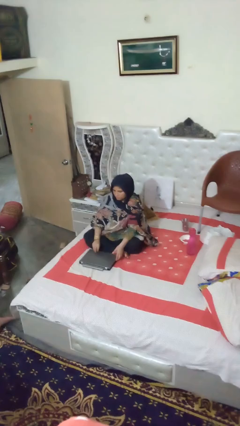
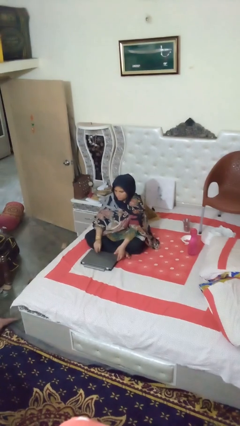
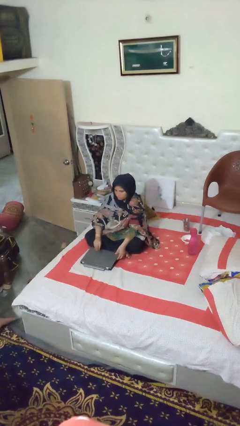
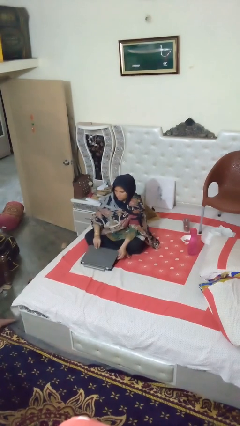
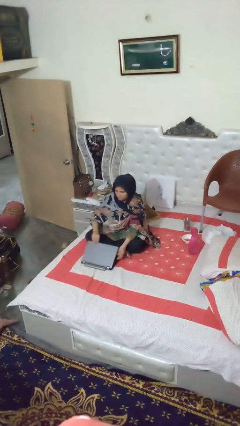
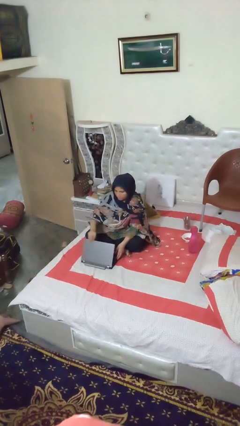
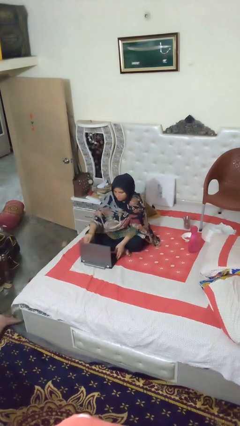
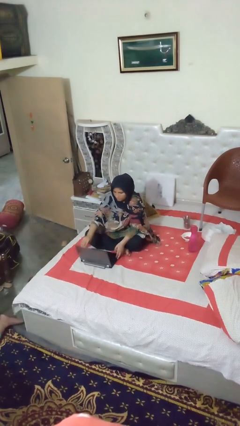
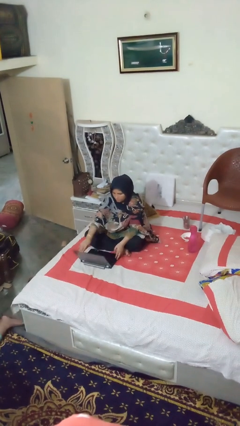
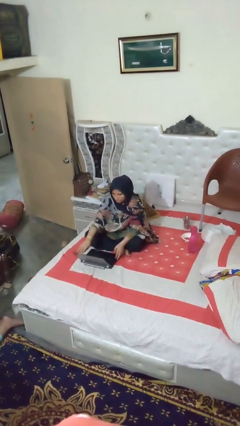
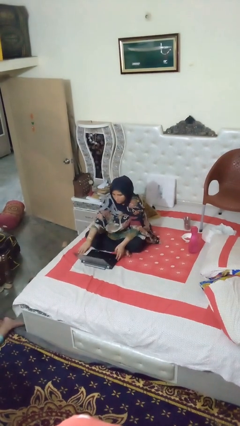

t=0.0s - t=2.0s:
person opens laptop

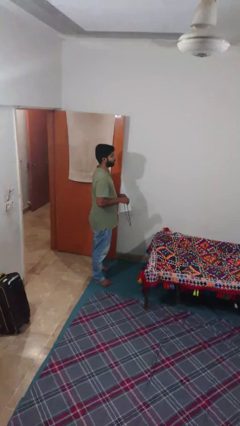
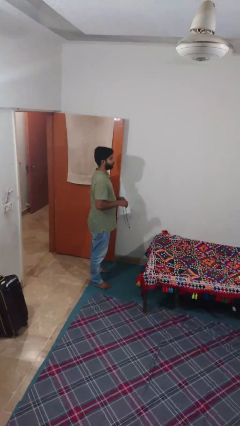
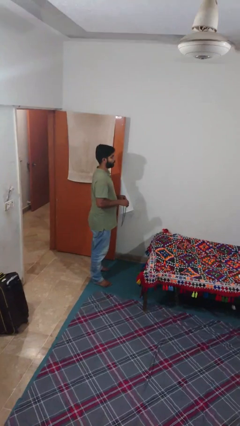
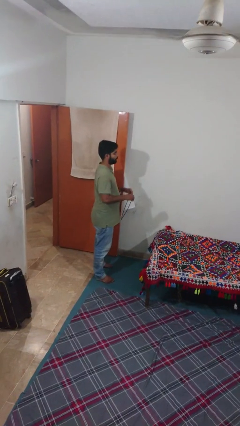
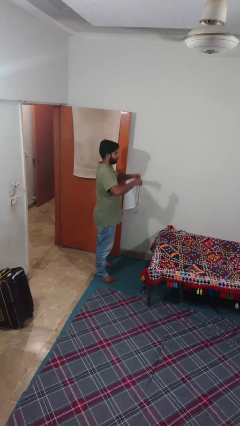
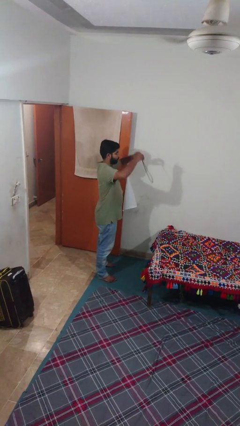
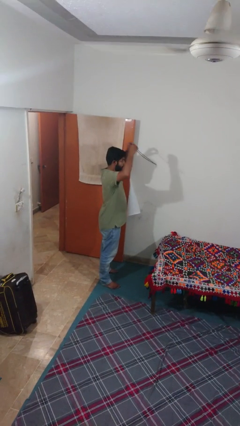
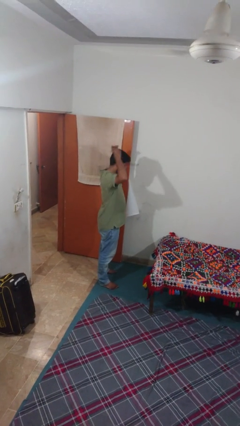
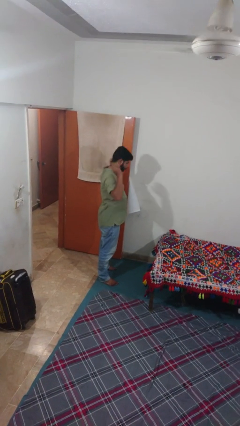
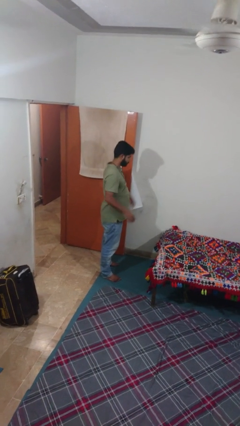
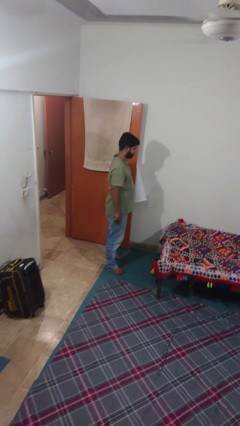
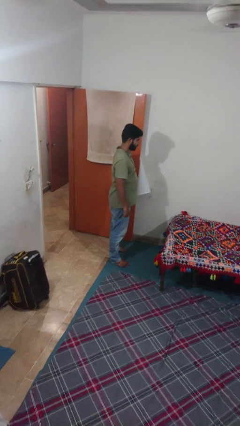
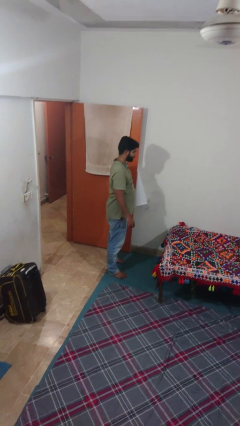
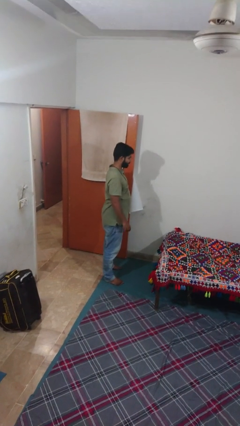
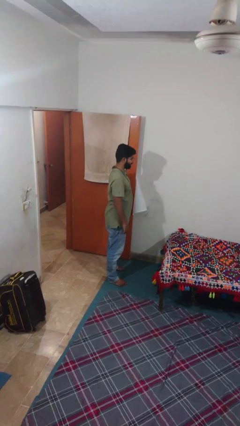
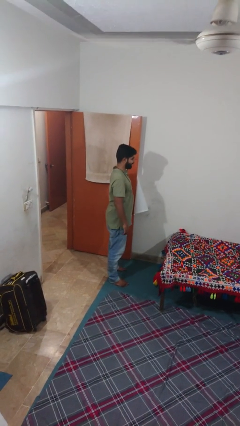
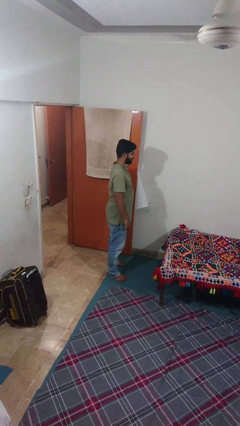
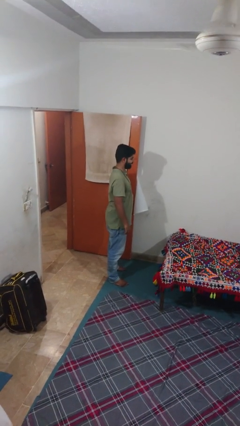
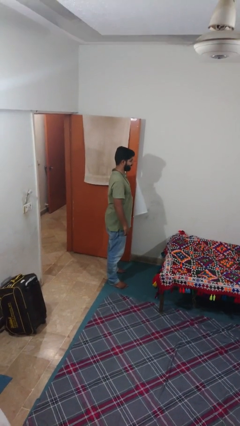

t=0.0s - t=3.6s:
person puts on necklace

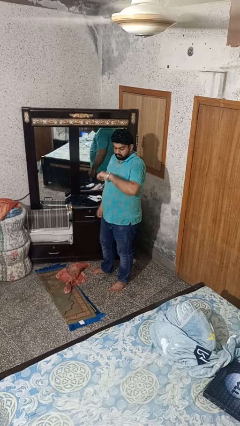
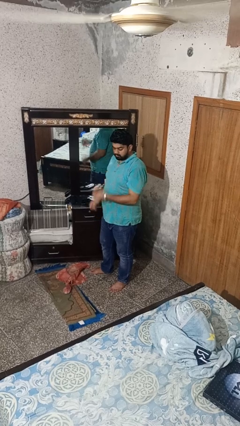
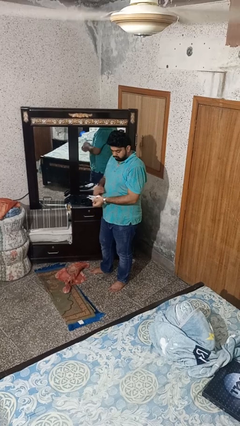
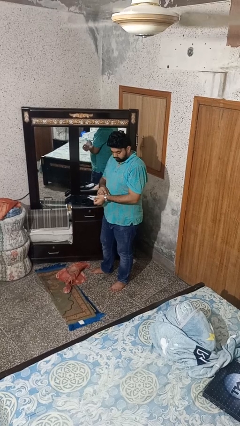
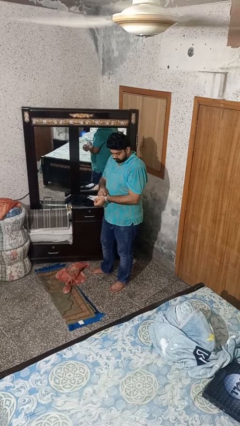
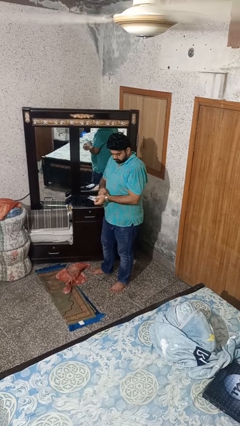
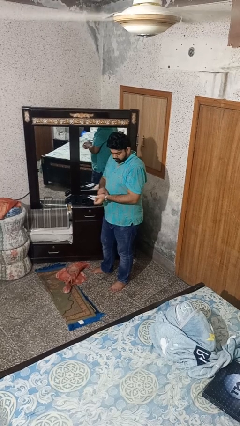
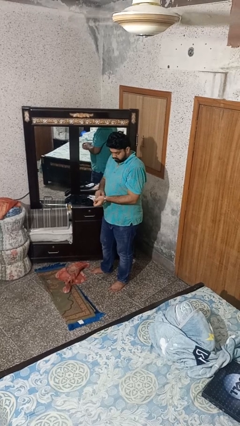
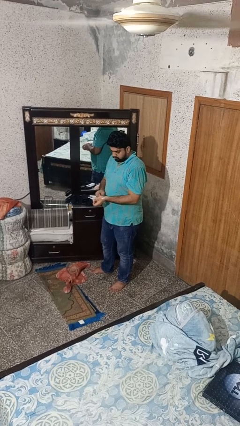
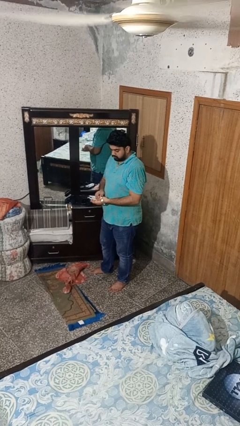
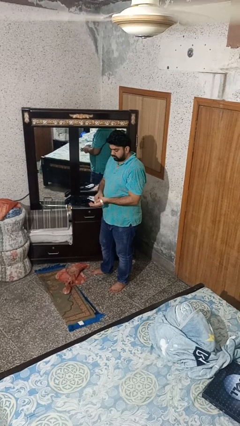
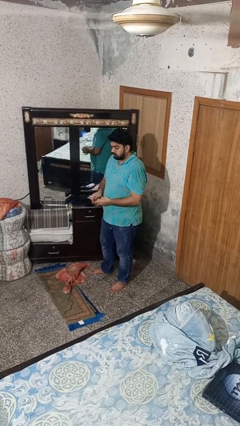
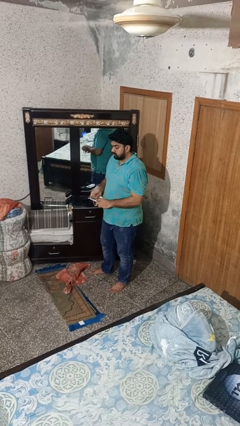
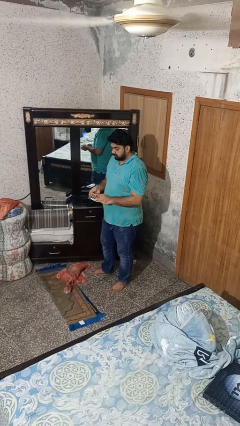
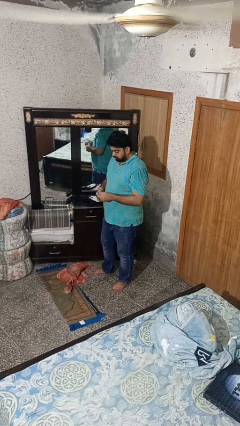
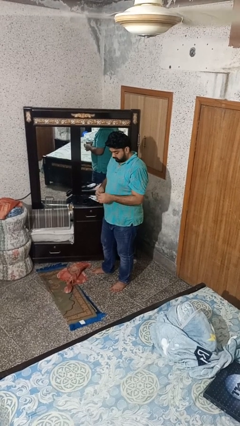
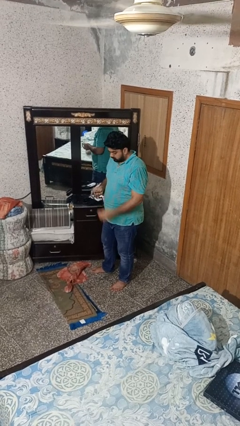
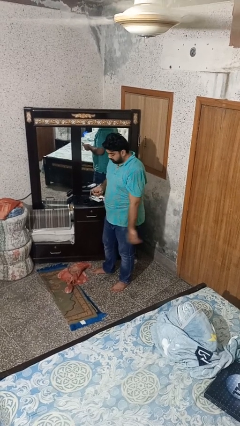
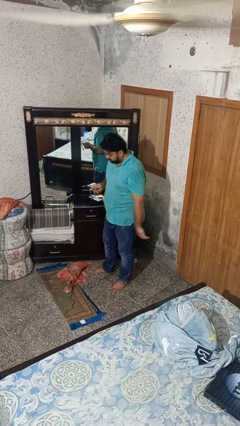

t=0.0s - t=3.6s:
person takes off wristwatch

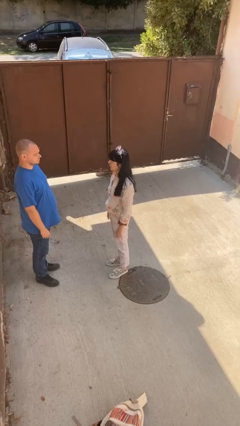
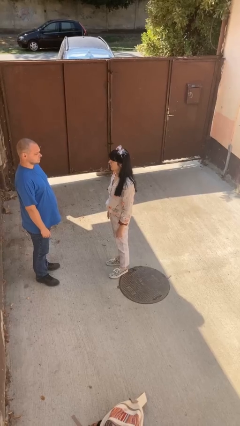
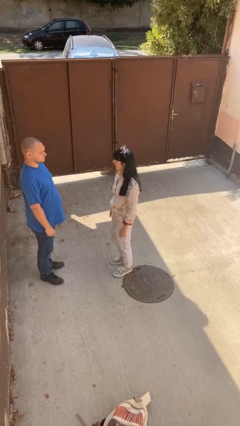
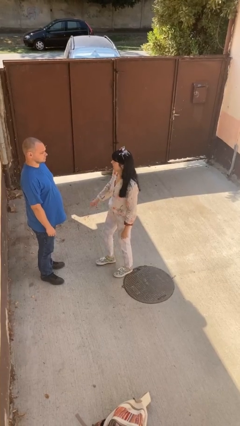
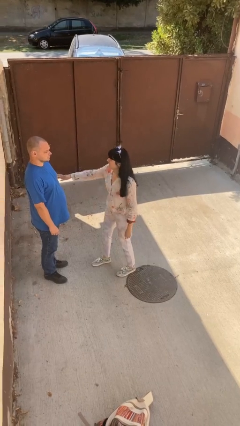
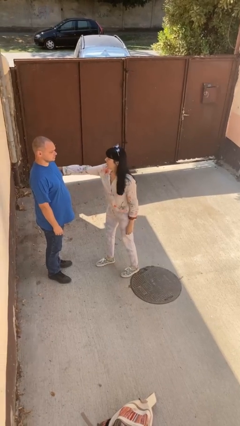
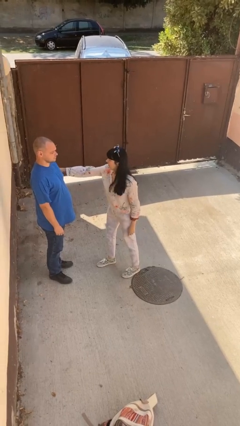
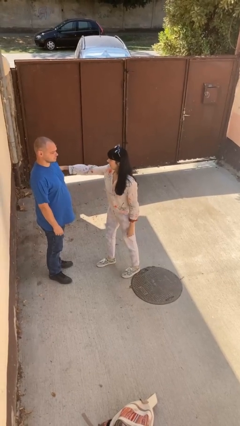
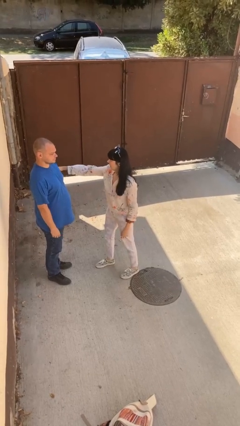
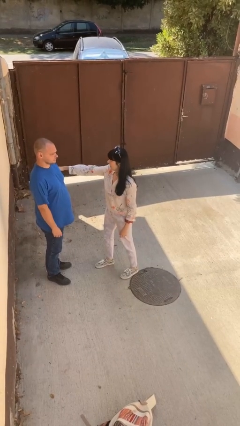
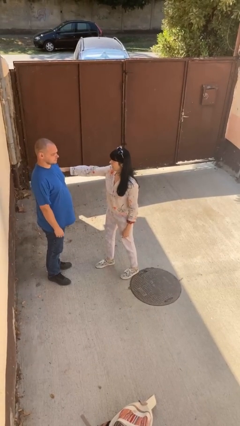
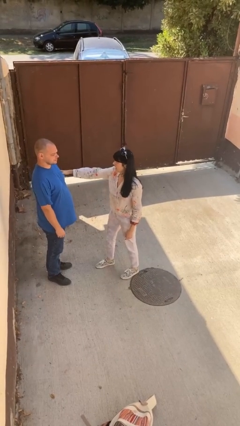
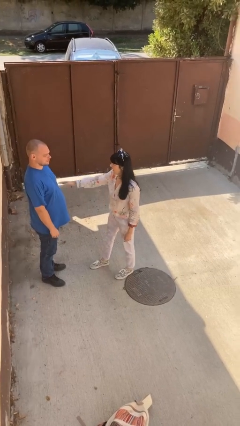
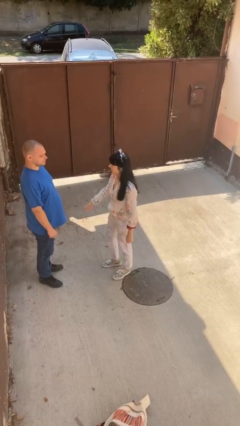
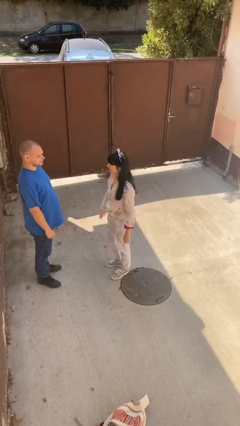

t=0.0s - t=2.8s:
person grabs person by bicep

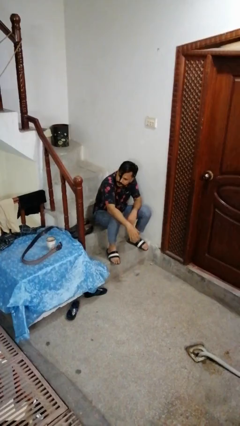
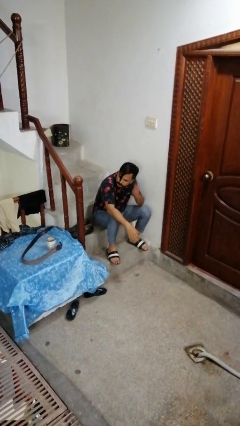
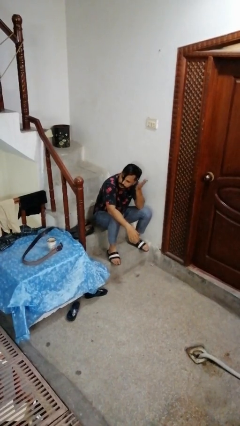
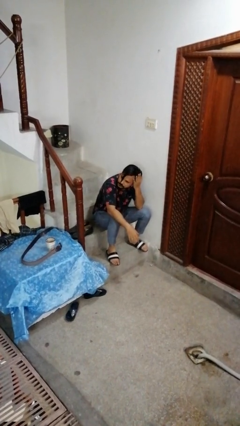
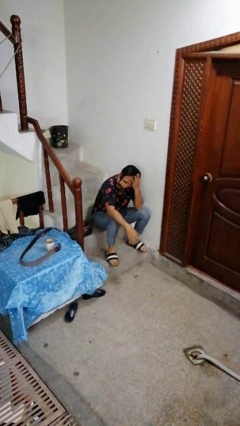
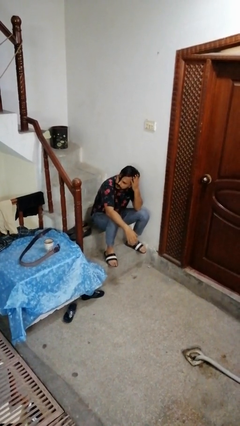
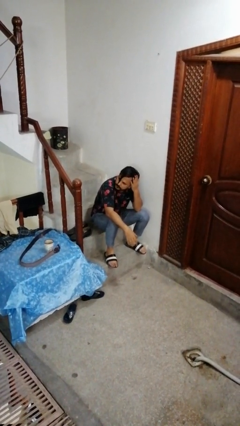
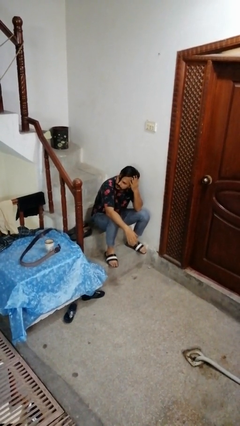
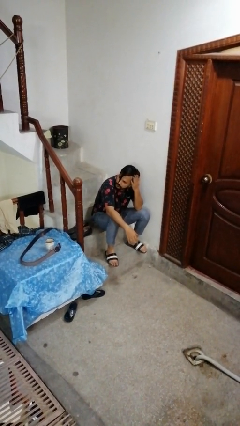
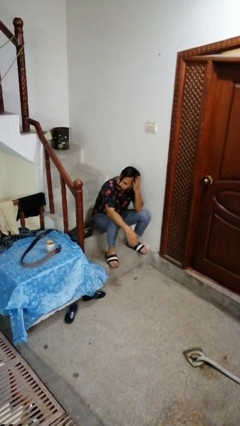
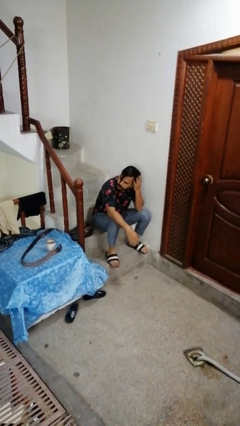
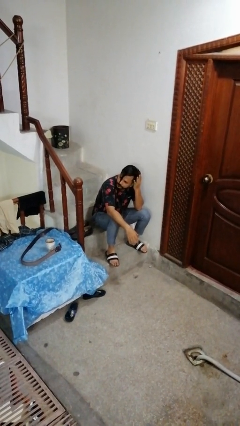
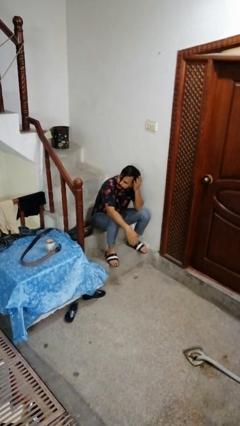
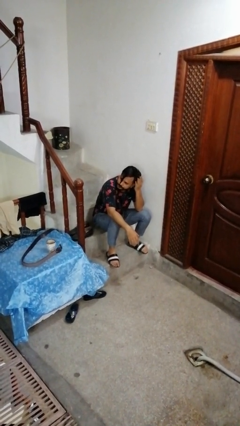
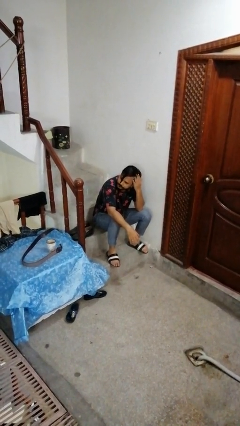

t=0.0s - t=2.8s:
person strokes hair

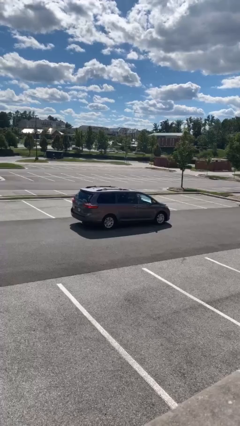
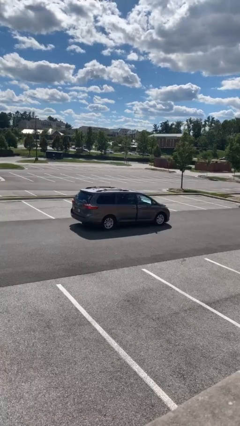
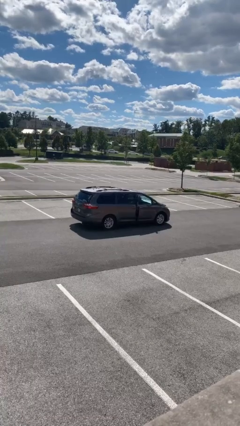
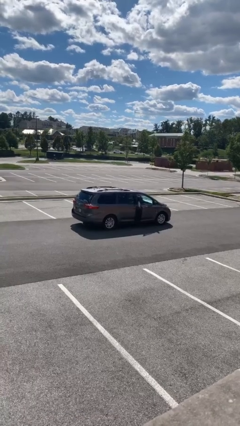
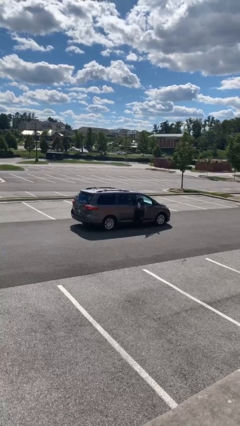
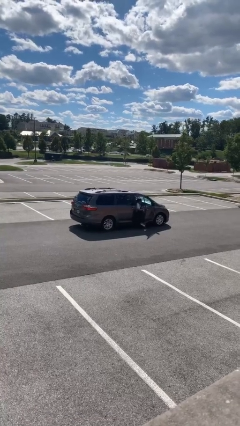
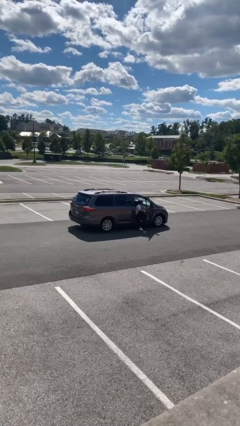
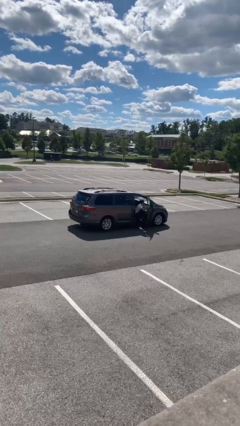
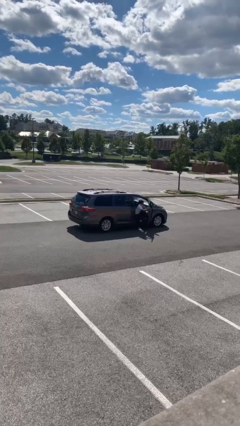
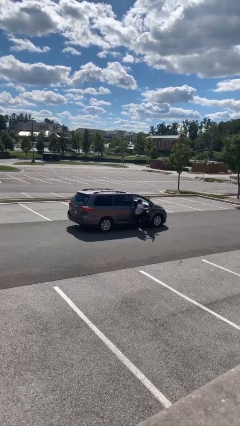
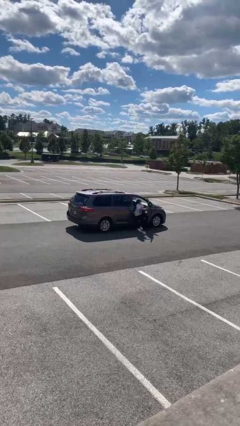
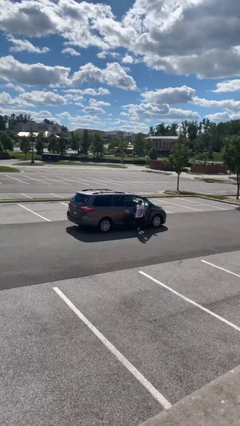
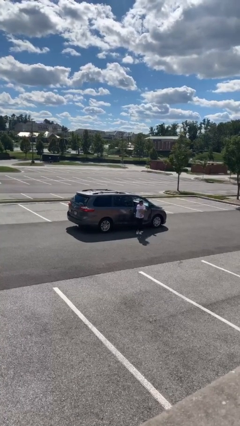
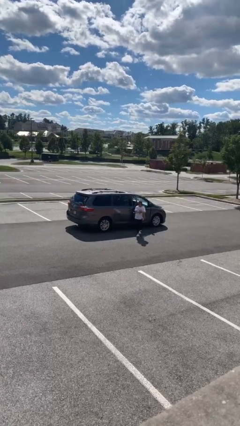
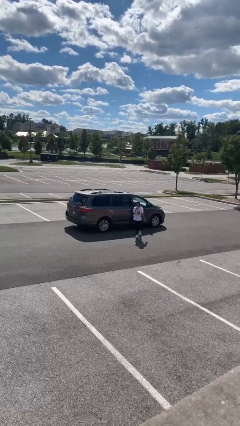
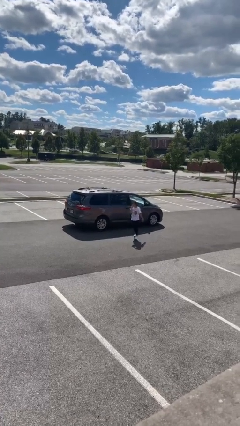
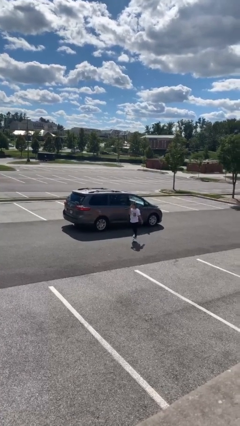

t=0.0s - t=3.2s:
car drops off person
